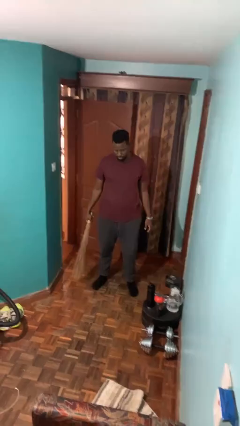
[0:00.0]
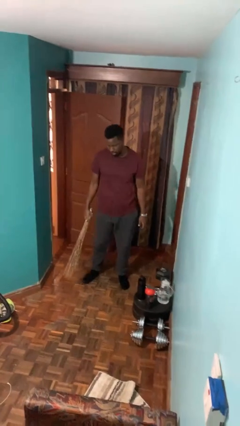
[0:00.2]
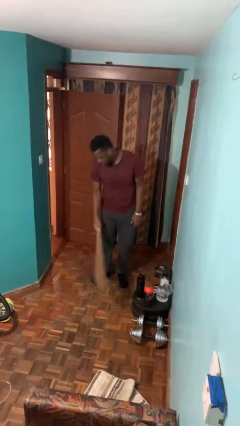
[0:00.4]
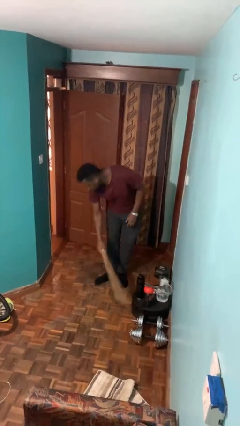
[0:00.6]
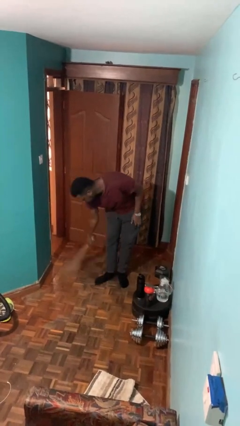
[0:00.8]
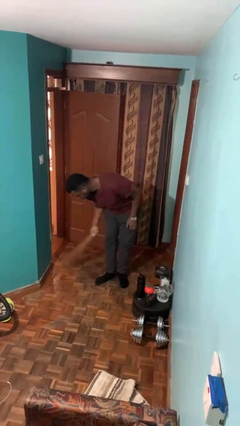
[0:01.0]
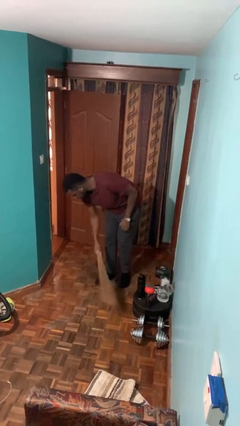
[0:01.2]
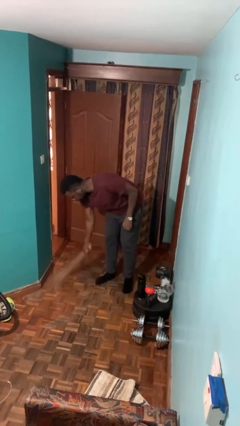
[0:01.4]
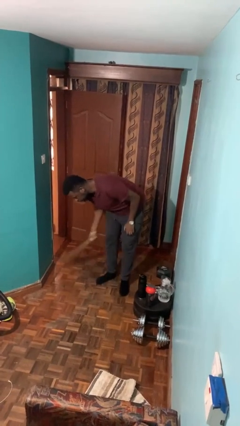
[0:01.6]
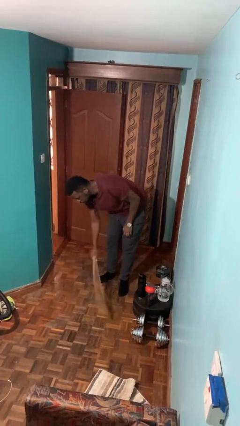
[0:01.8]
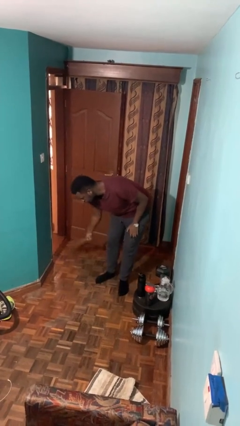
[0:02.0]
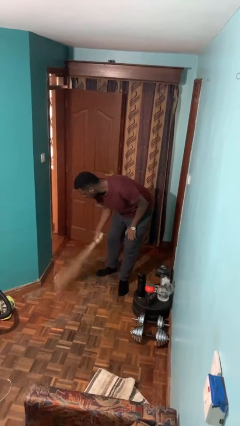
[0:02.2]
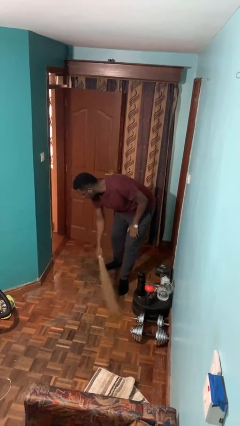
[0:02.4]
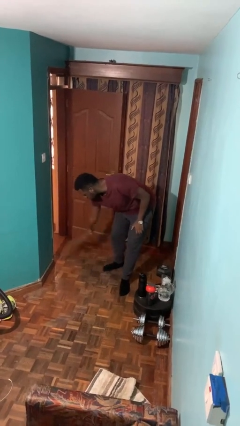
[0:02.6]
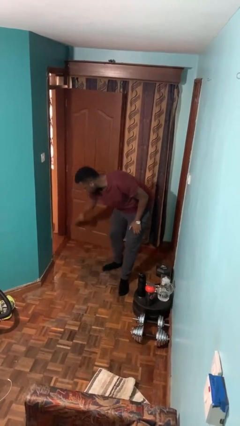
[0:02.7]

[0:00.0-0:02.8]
person sweeps floor

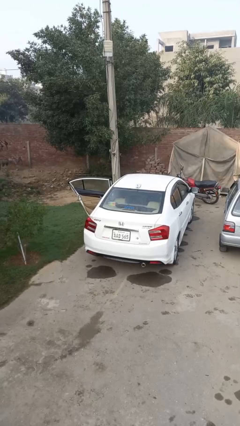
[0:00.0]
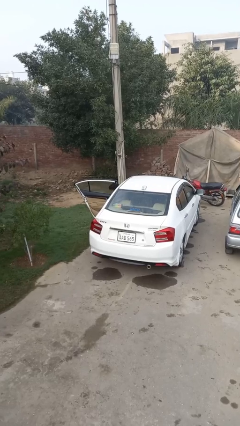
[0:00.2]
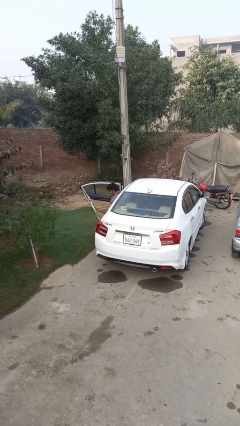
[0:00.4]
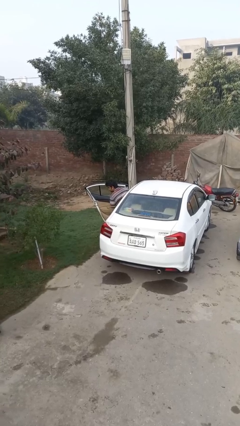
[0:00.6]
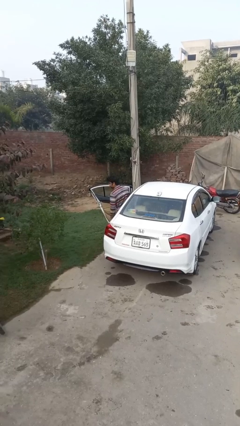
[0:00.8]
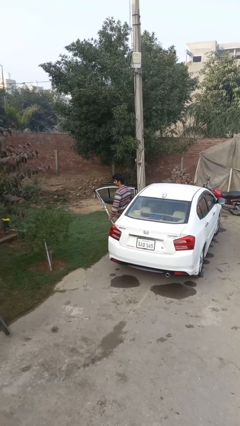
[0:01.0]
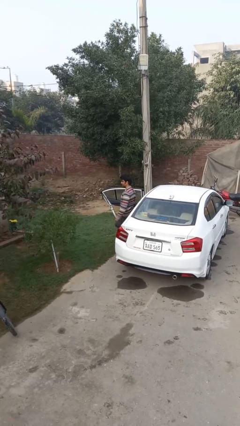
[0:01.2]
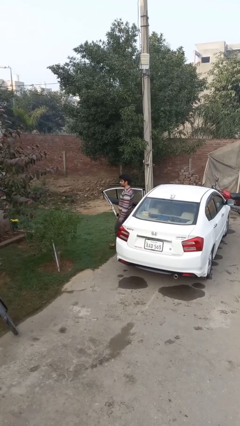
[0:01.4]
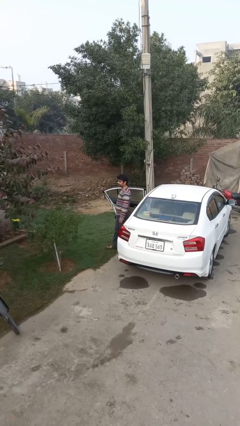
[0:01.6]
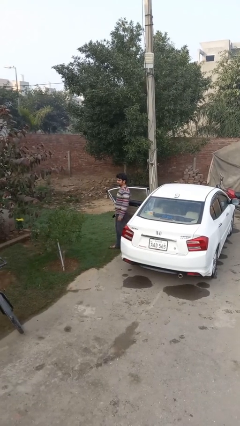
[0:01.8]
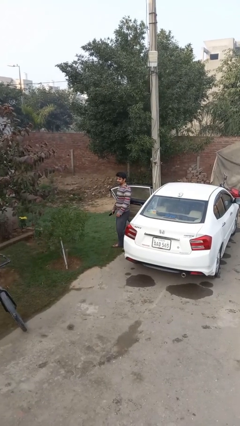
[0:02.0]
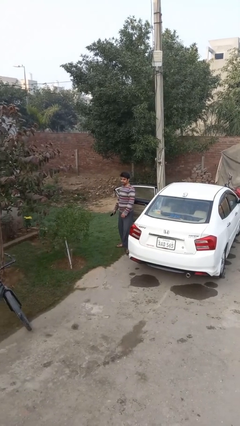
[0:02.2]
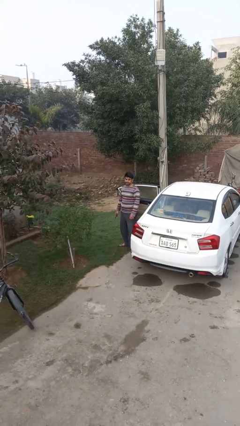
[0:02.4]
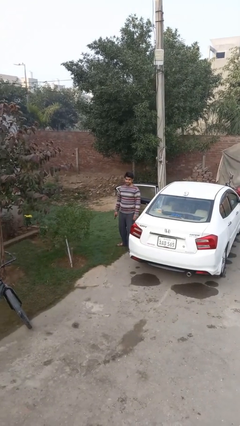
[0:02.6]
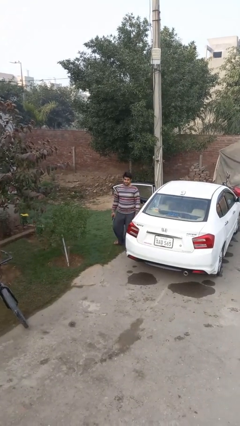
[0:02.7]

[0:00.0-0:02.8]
person exits car

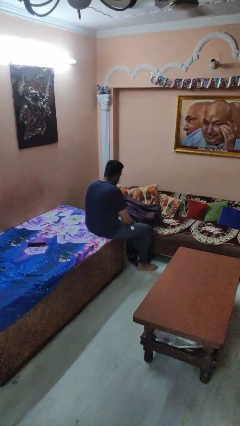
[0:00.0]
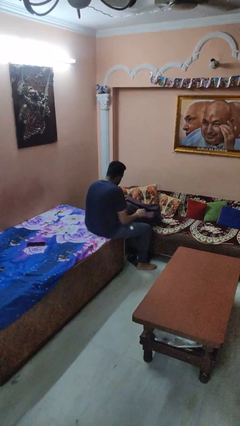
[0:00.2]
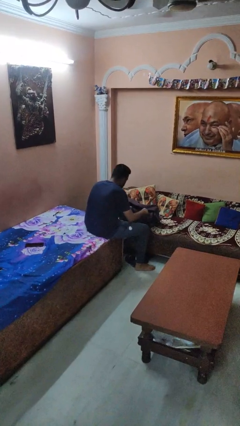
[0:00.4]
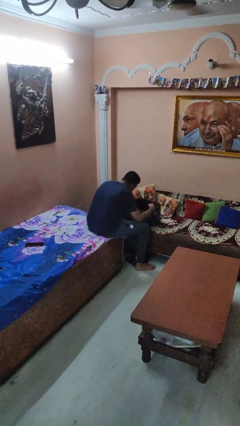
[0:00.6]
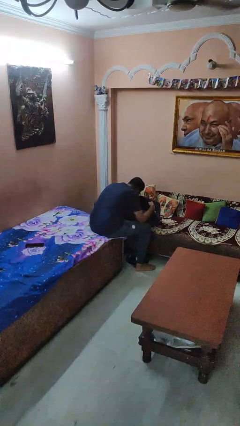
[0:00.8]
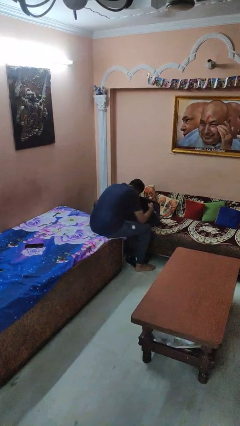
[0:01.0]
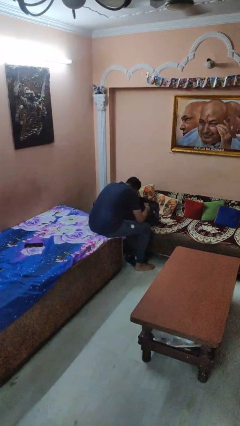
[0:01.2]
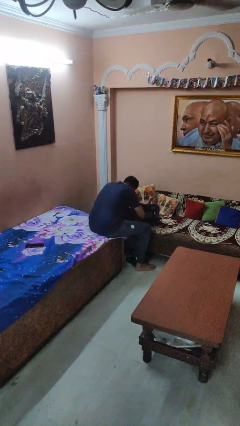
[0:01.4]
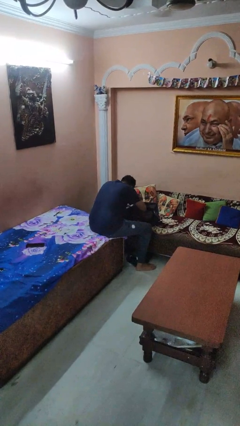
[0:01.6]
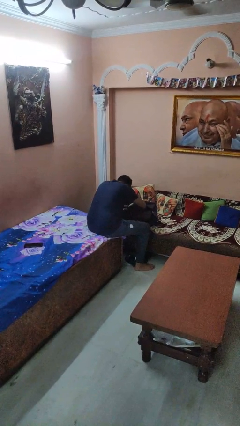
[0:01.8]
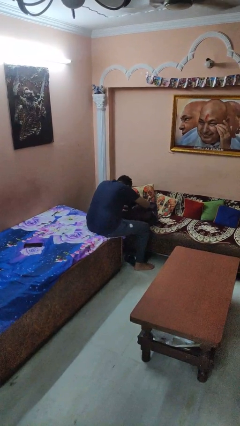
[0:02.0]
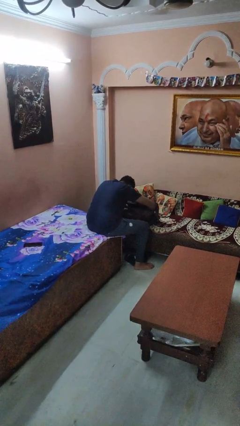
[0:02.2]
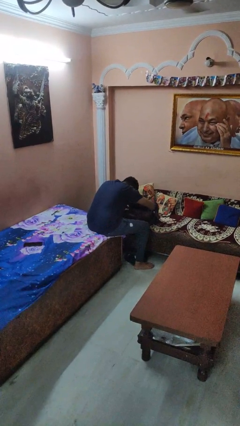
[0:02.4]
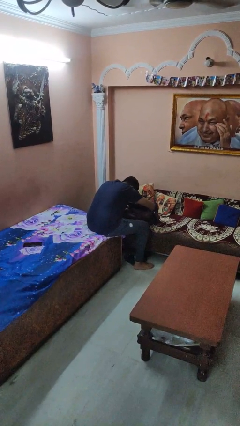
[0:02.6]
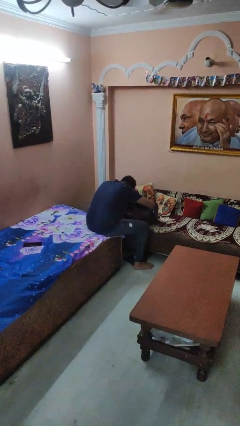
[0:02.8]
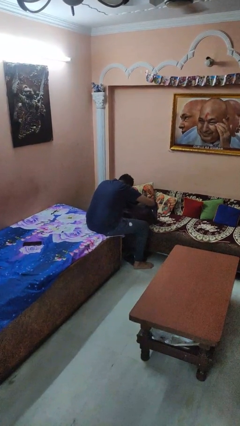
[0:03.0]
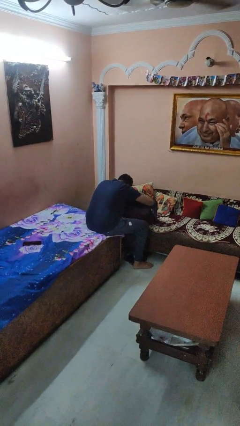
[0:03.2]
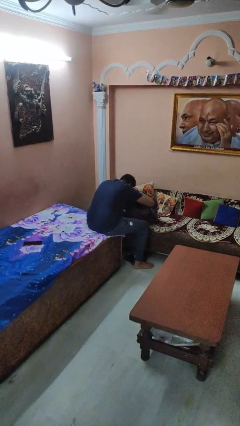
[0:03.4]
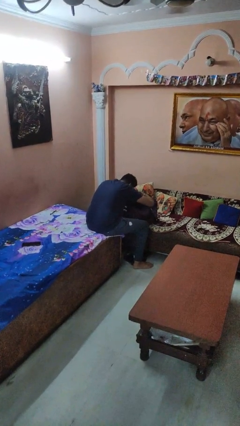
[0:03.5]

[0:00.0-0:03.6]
person searches in bag

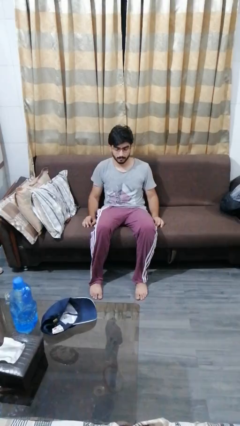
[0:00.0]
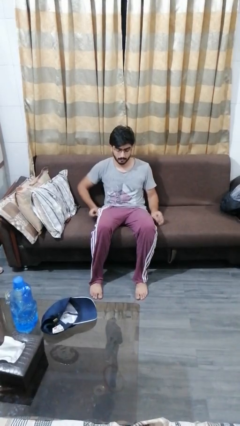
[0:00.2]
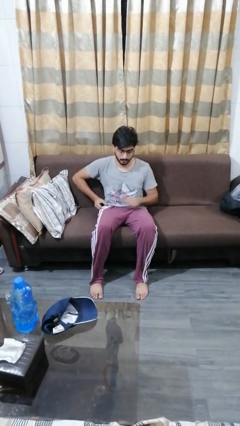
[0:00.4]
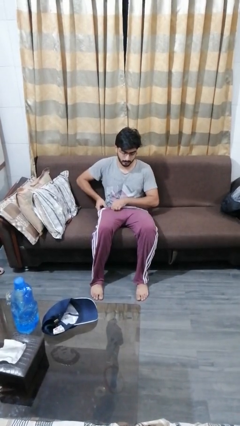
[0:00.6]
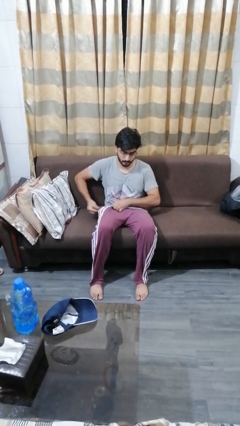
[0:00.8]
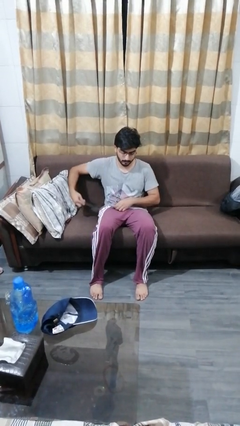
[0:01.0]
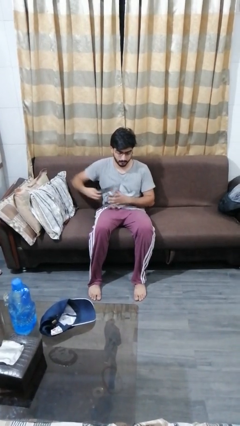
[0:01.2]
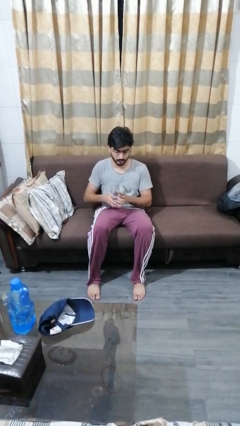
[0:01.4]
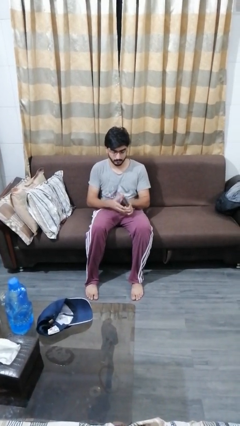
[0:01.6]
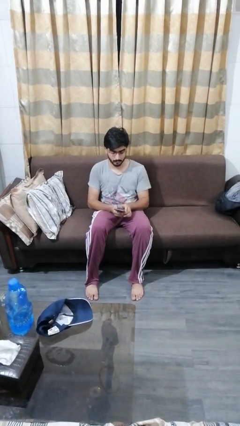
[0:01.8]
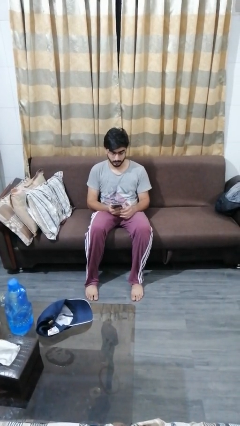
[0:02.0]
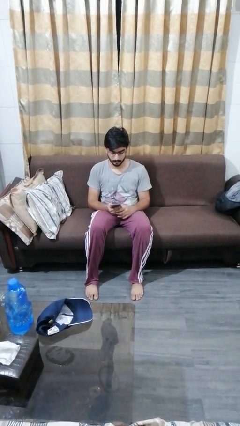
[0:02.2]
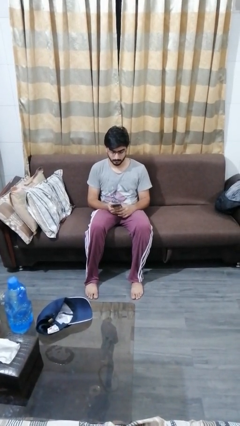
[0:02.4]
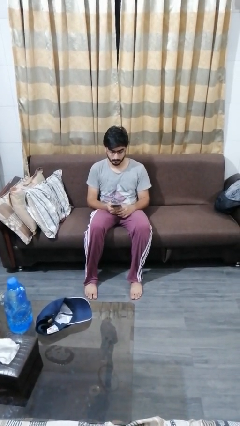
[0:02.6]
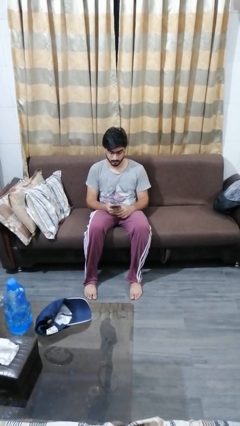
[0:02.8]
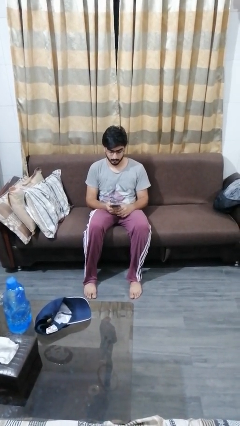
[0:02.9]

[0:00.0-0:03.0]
person takes phone from pocket

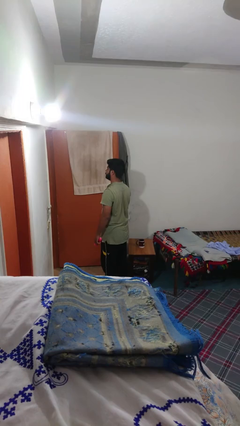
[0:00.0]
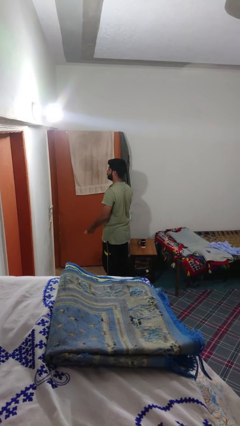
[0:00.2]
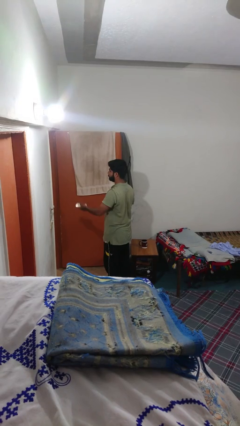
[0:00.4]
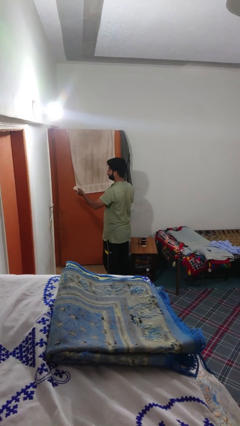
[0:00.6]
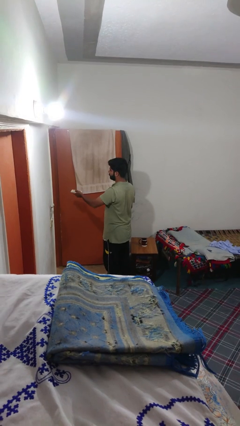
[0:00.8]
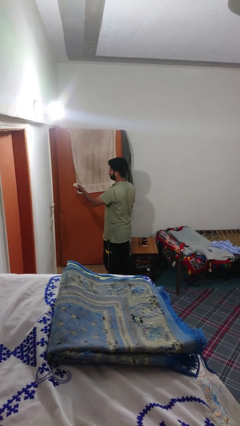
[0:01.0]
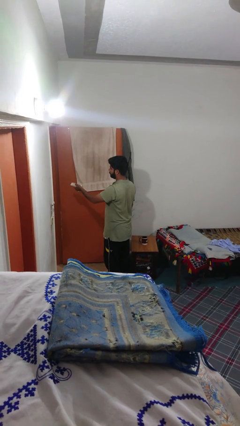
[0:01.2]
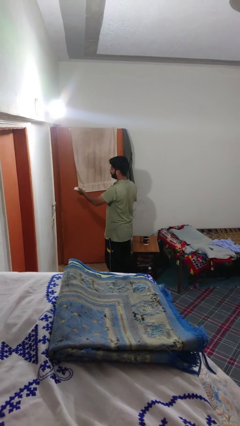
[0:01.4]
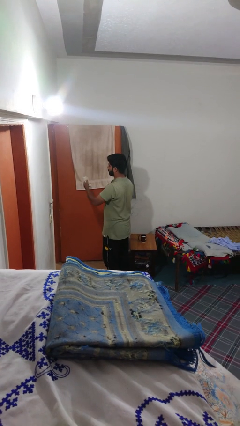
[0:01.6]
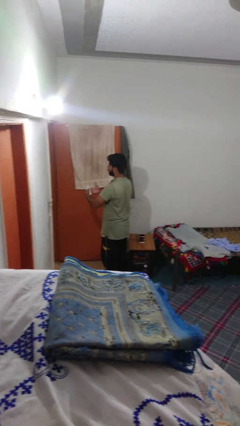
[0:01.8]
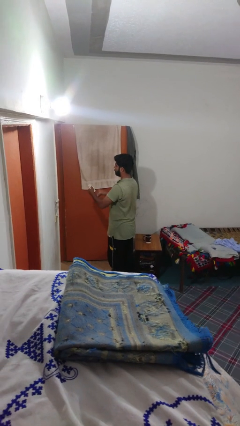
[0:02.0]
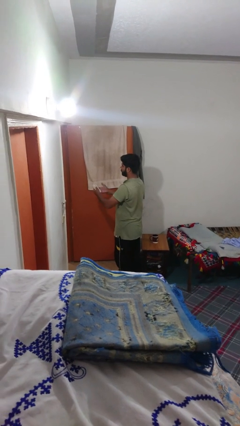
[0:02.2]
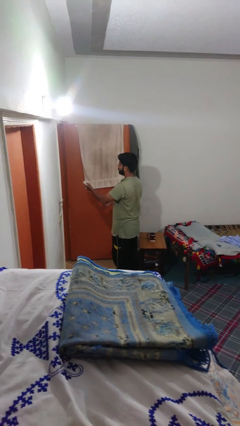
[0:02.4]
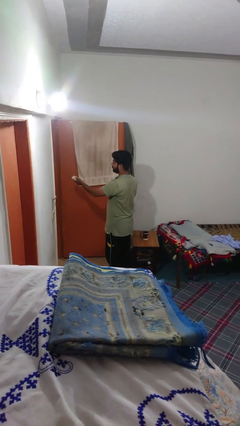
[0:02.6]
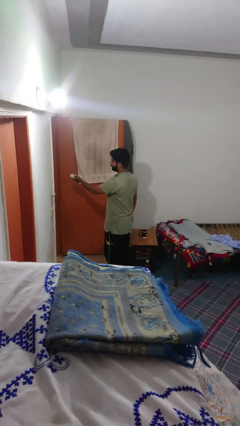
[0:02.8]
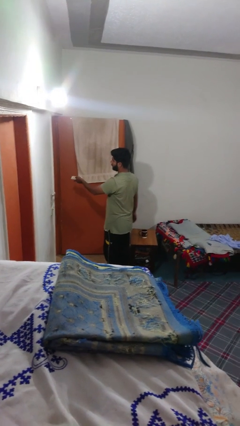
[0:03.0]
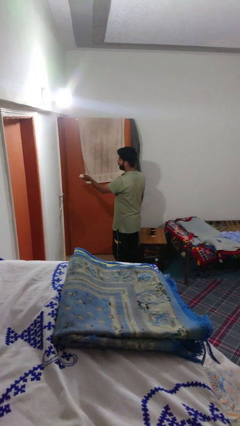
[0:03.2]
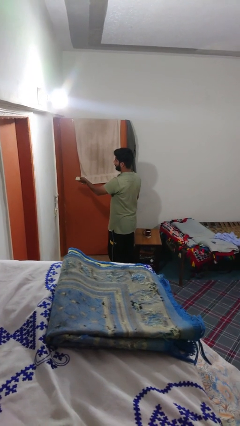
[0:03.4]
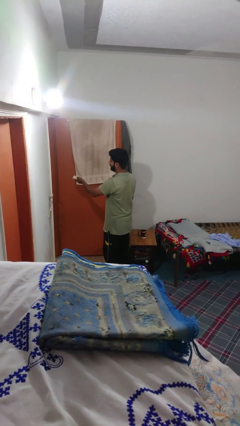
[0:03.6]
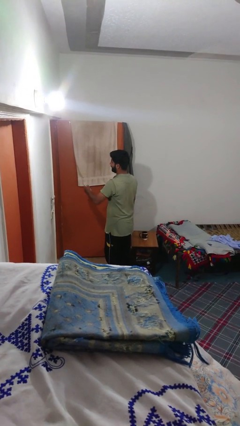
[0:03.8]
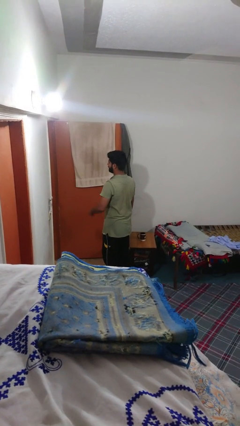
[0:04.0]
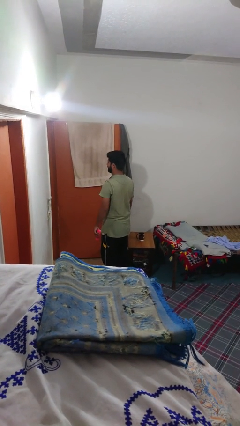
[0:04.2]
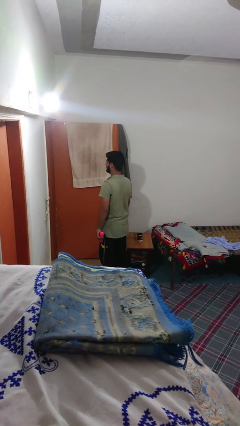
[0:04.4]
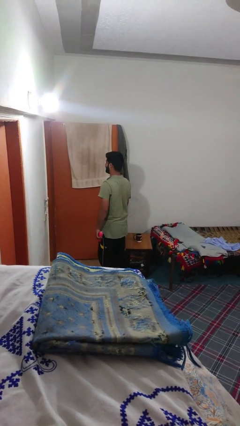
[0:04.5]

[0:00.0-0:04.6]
person uses television remote

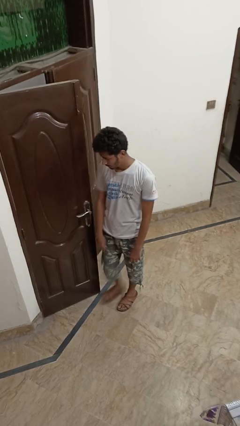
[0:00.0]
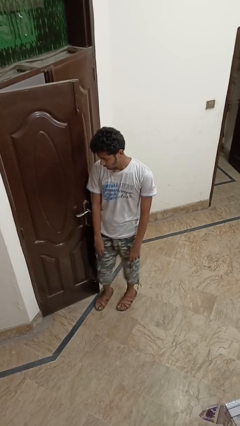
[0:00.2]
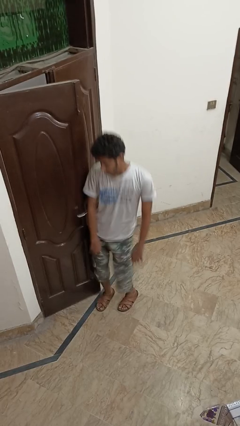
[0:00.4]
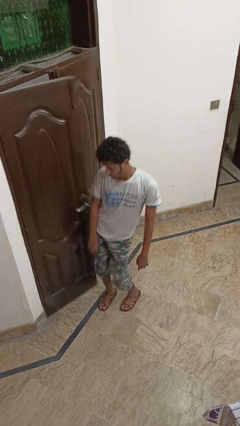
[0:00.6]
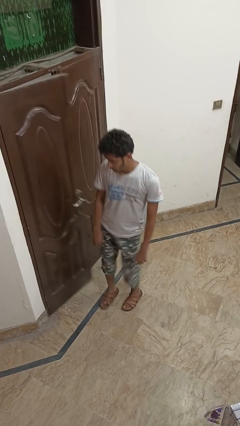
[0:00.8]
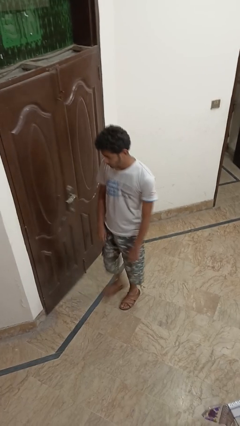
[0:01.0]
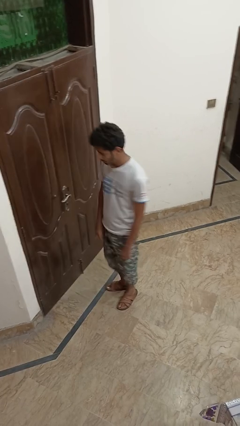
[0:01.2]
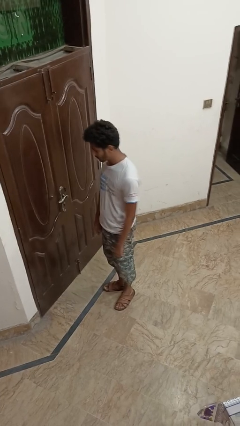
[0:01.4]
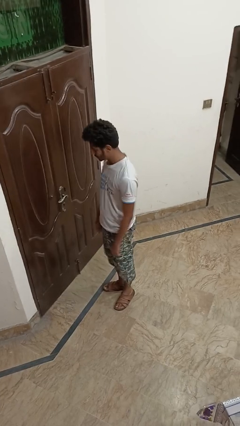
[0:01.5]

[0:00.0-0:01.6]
person closes door with hip
